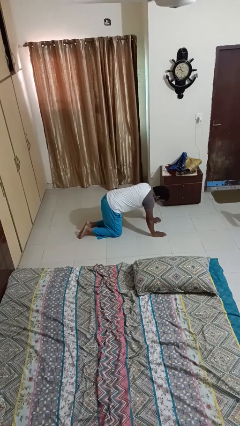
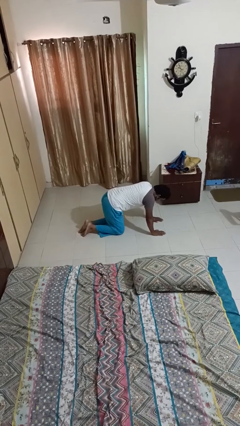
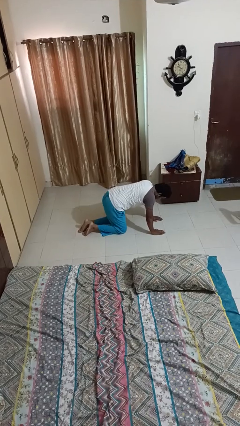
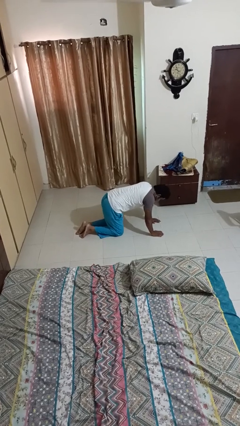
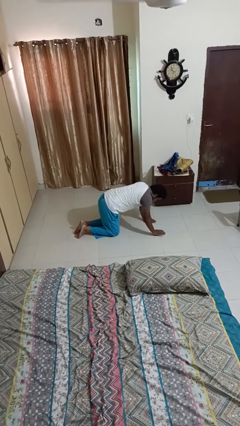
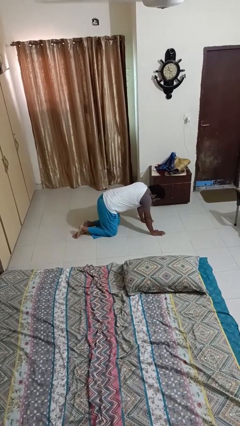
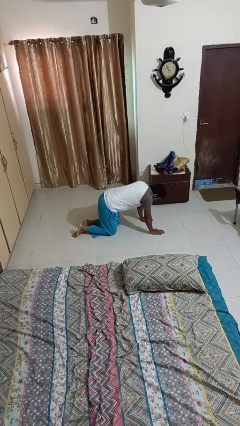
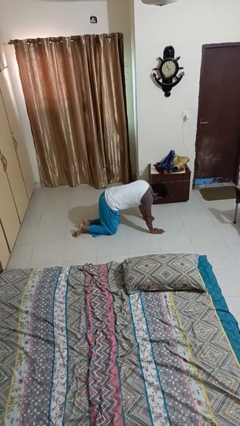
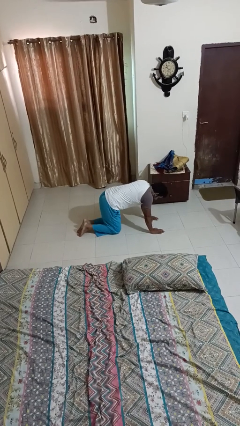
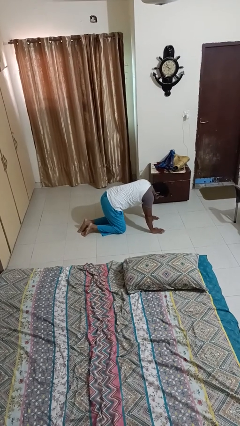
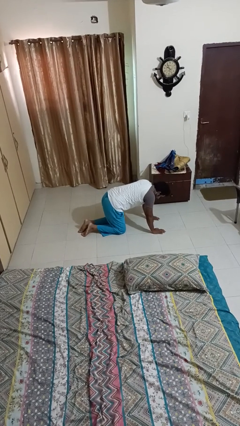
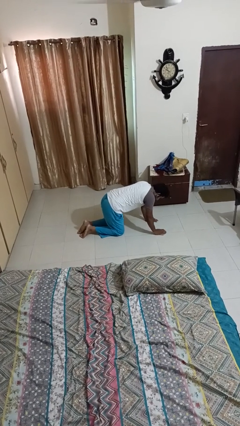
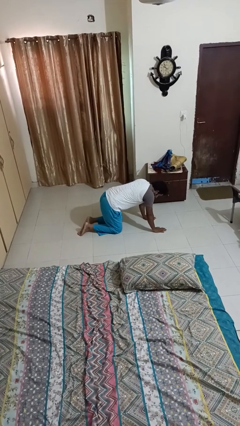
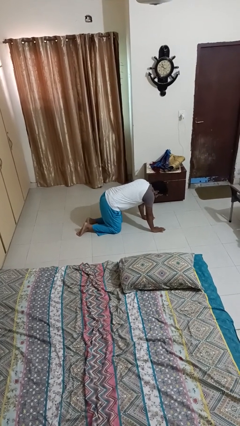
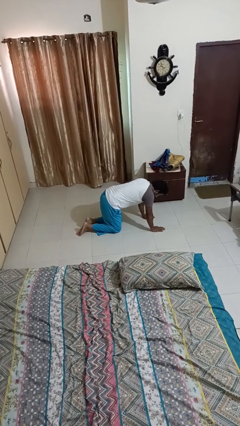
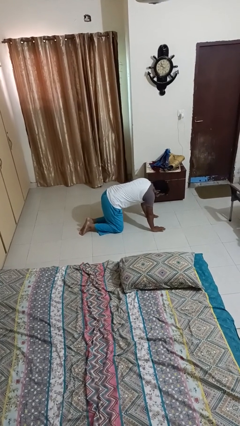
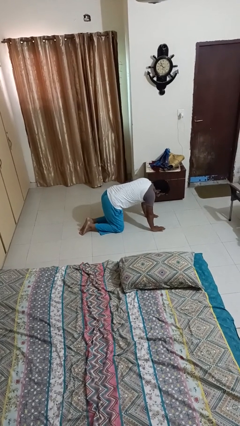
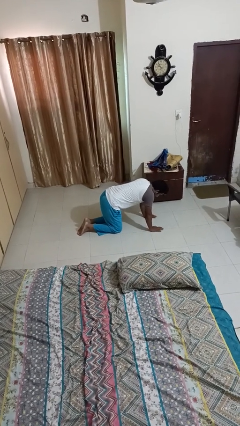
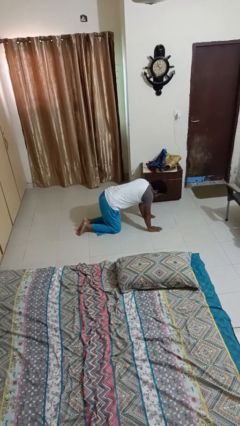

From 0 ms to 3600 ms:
person crawls

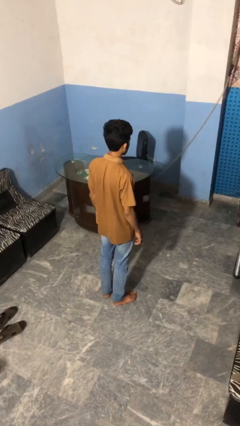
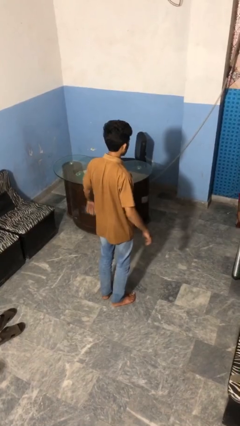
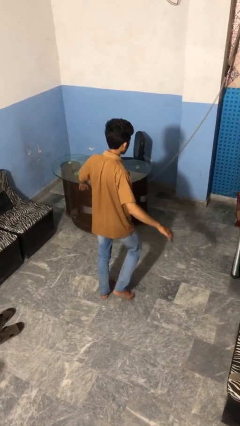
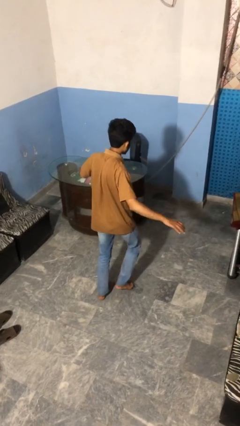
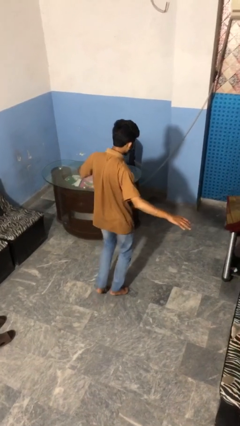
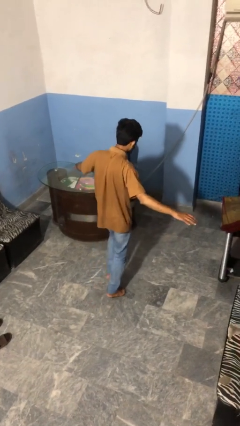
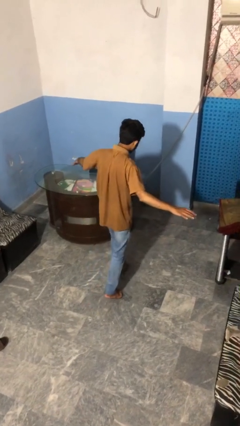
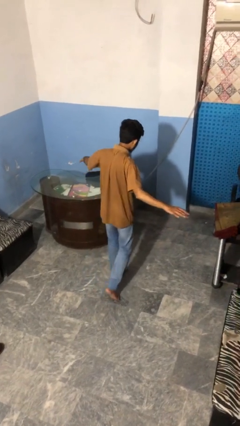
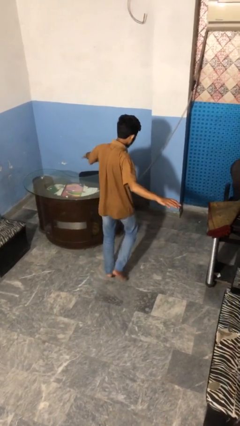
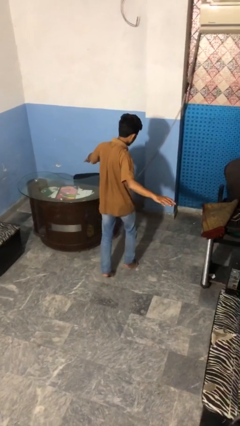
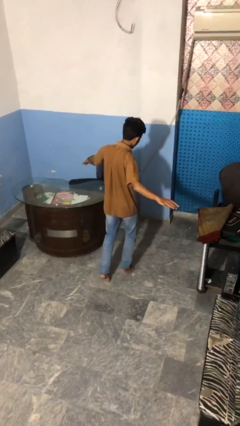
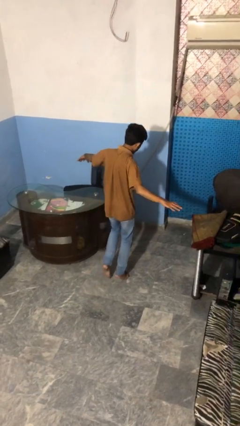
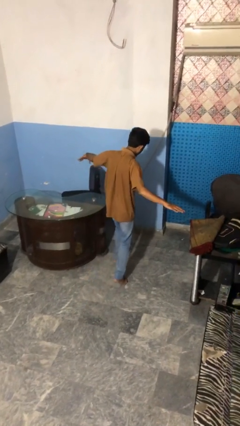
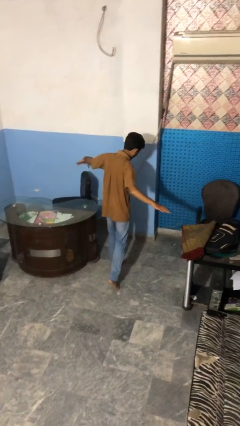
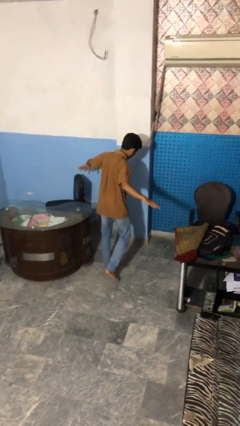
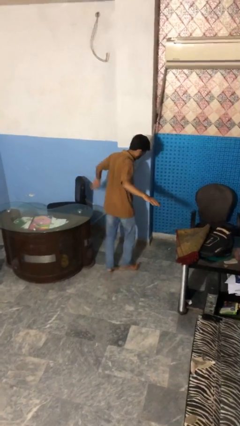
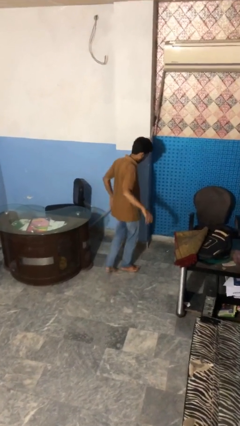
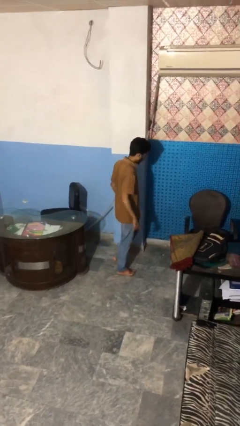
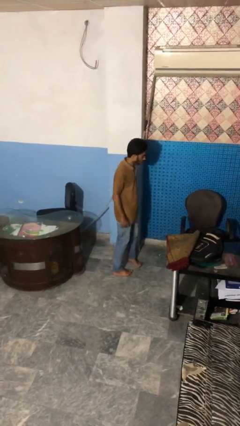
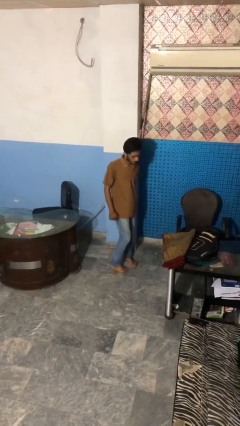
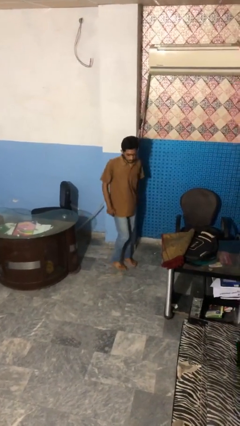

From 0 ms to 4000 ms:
person walks tiptoe

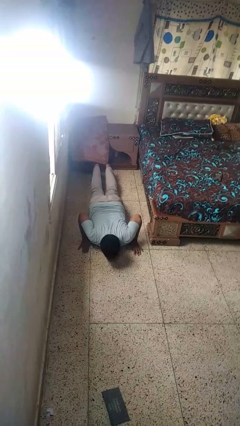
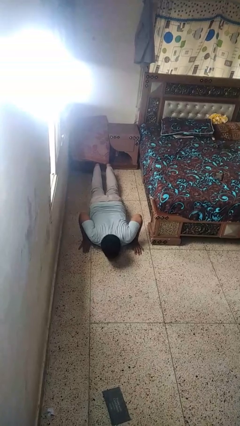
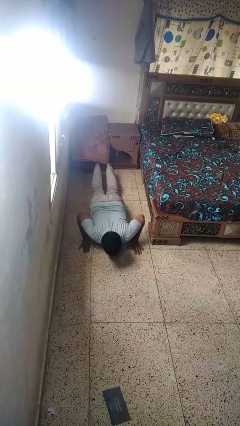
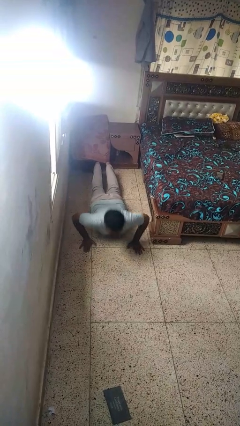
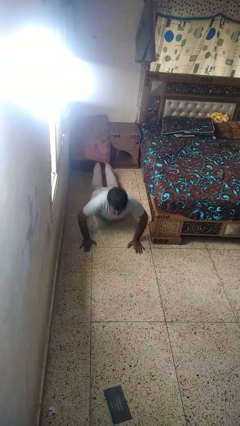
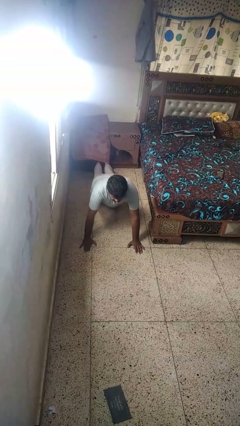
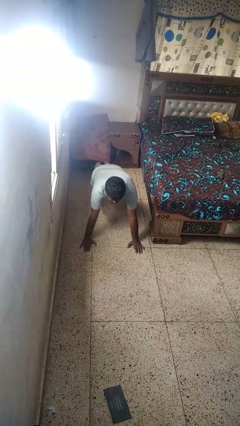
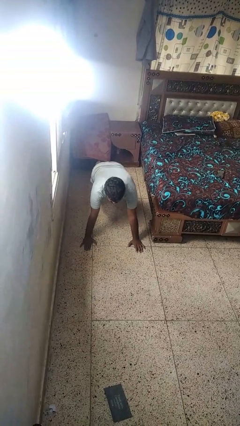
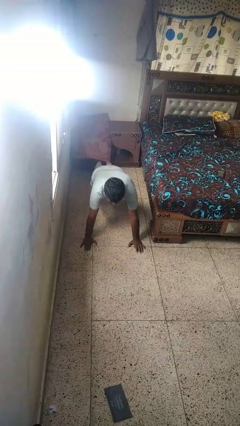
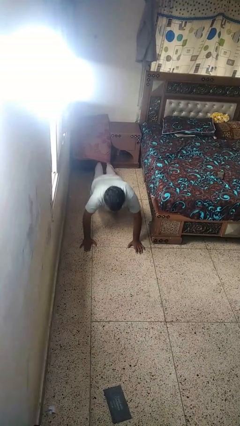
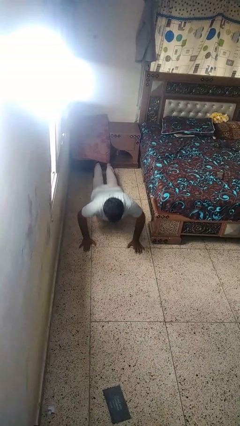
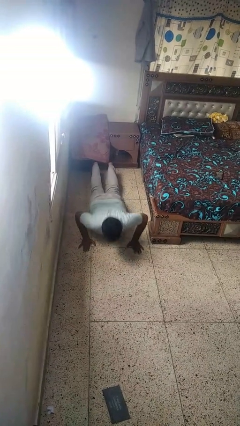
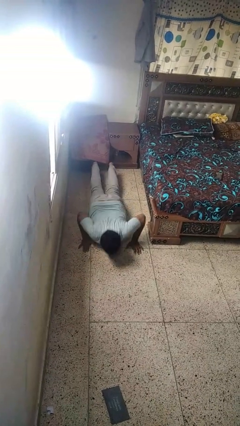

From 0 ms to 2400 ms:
person exercises with pushup

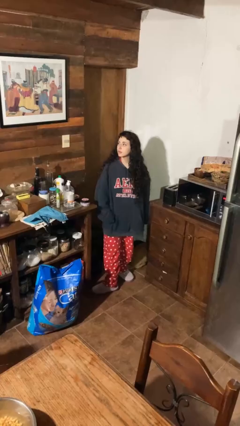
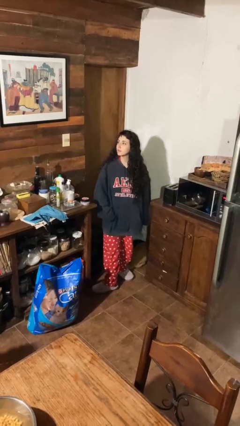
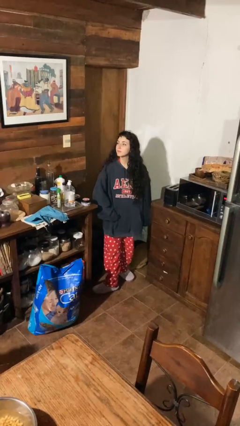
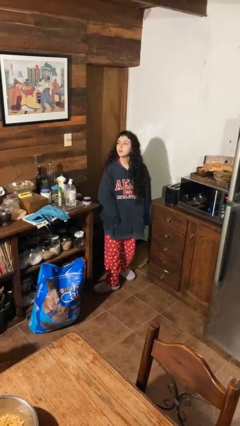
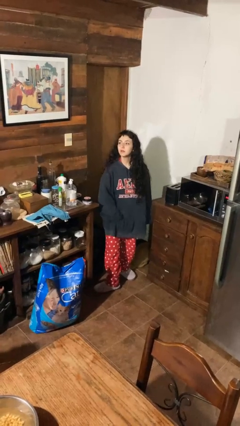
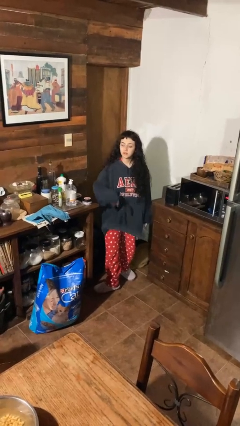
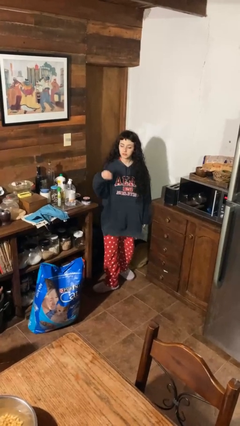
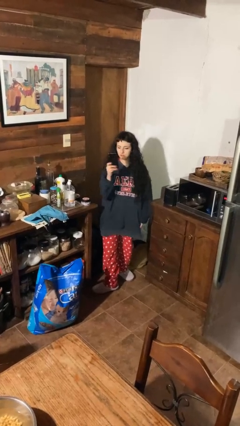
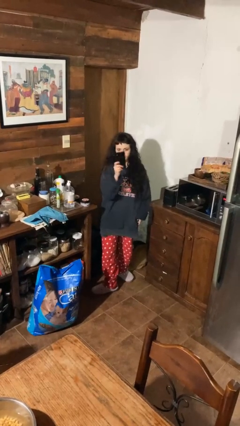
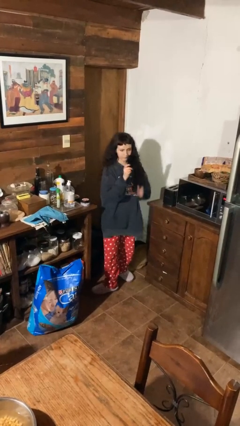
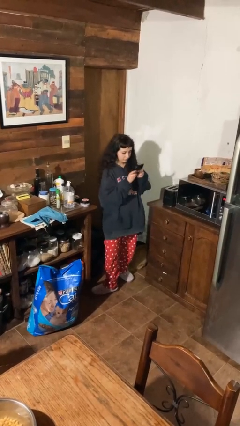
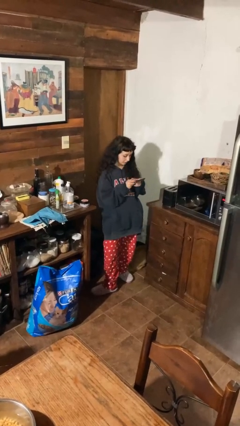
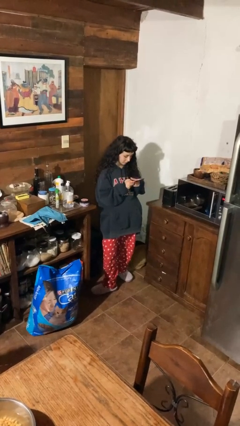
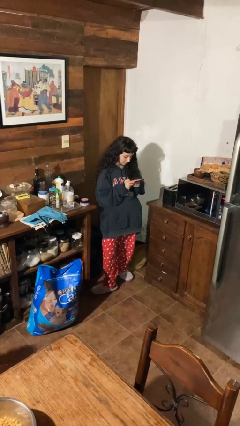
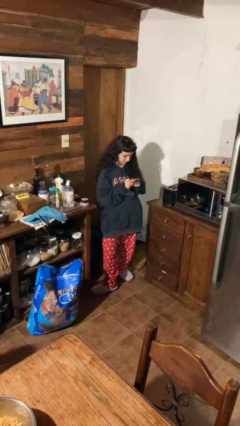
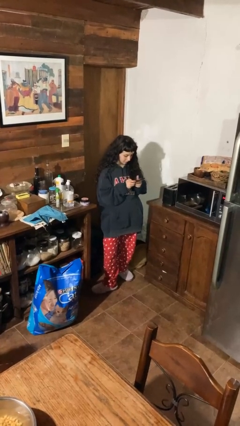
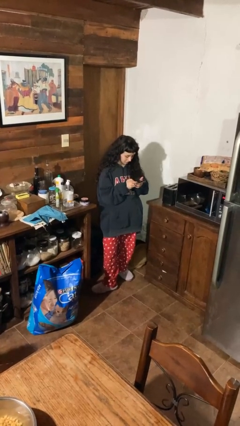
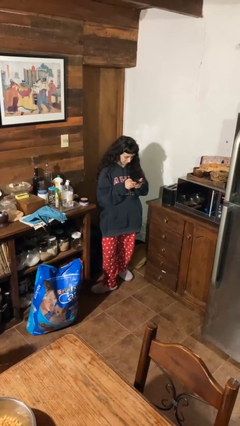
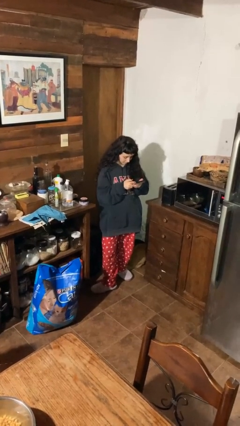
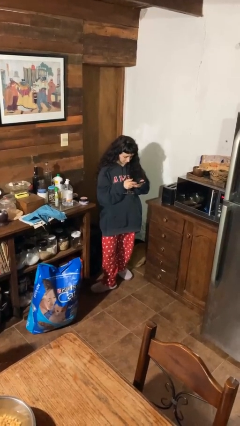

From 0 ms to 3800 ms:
person takes phone from pocket

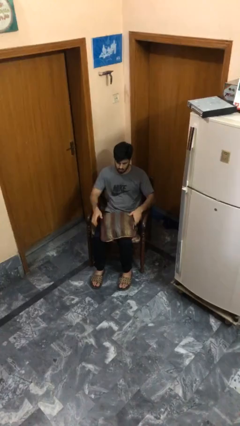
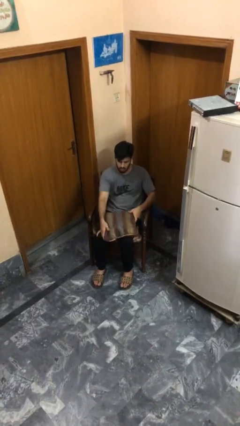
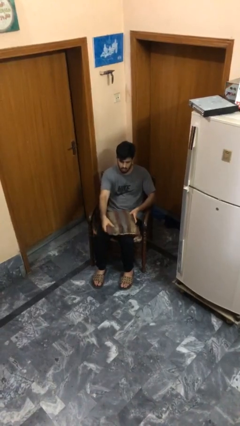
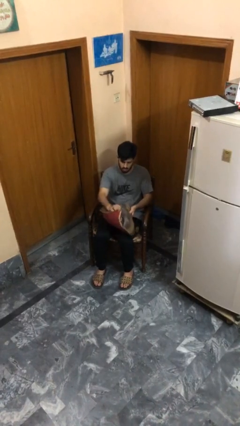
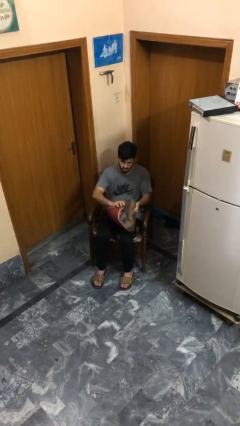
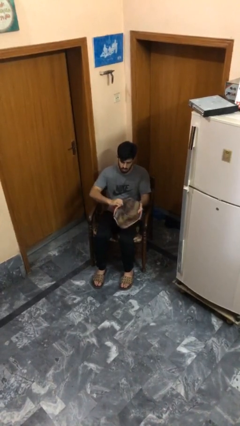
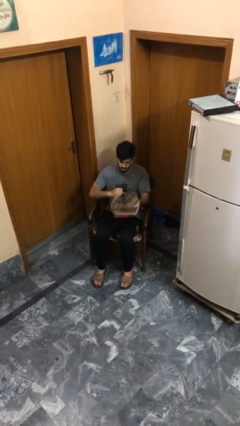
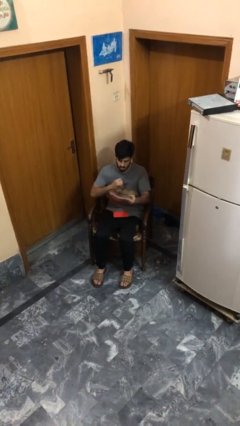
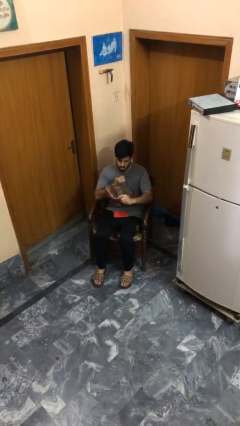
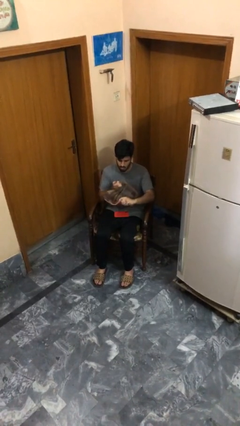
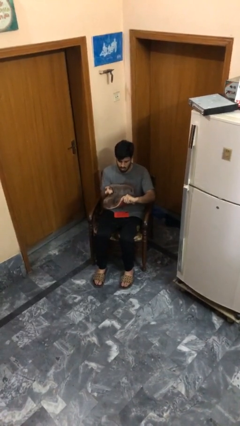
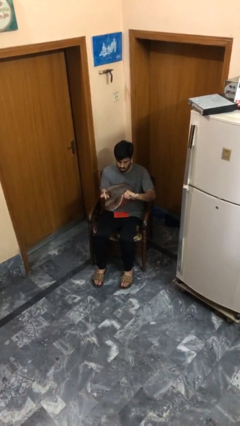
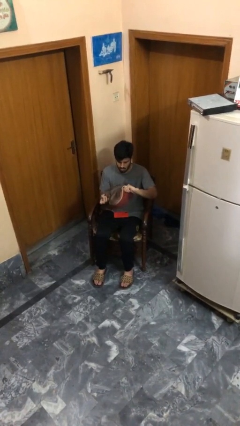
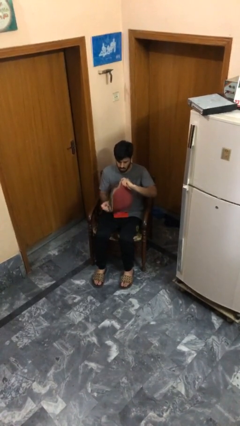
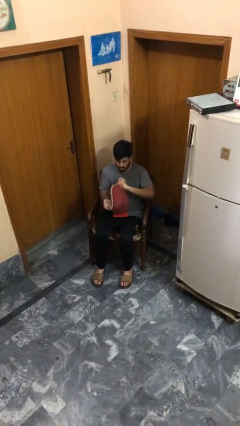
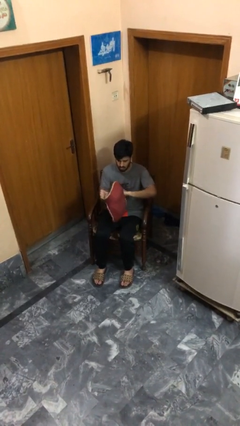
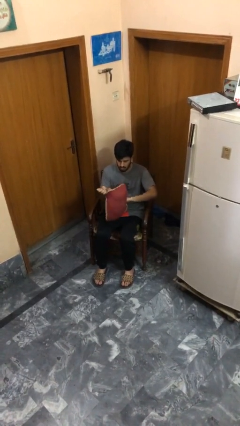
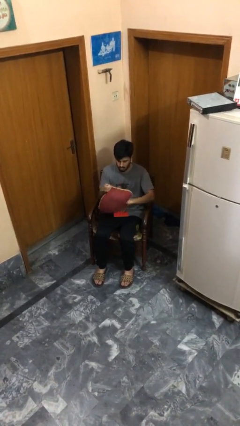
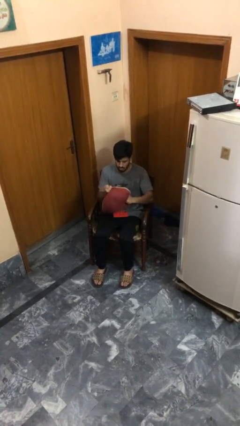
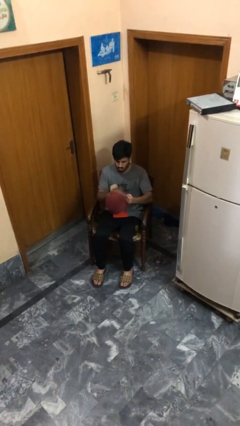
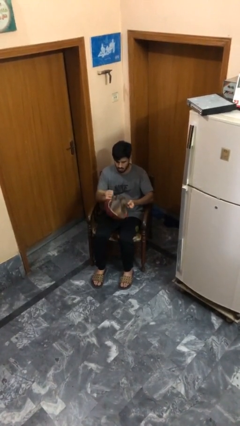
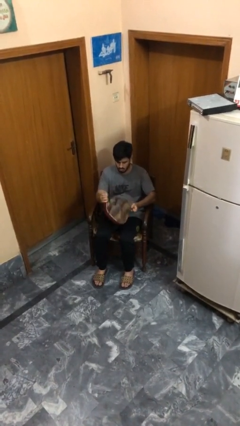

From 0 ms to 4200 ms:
person squeezes object
